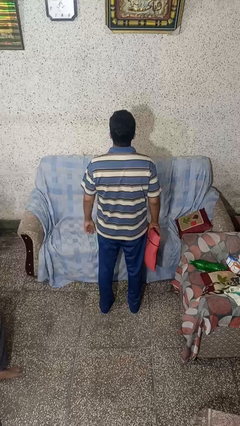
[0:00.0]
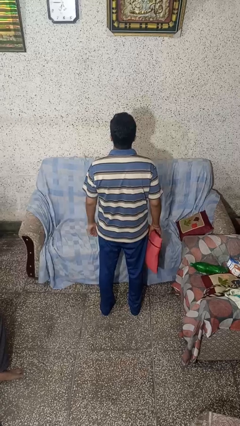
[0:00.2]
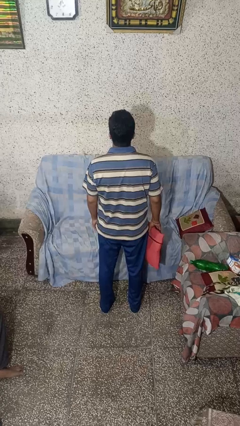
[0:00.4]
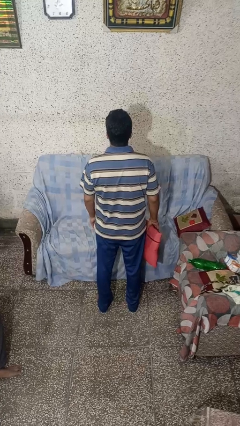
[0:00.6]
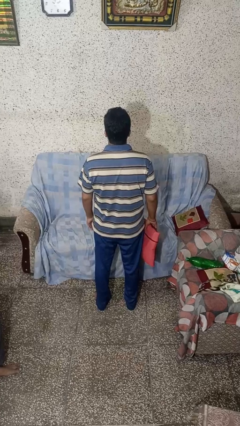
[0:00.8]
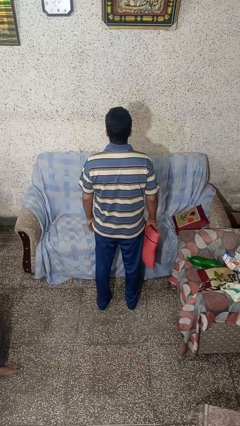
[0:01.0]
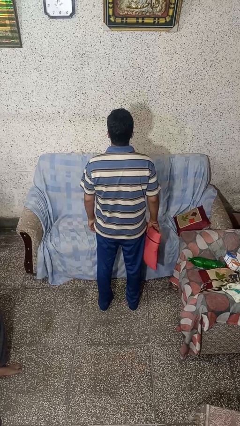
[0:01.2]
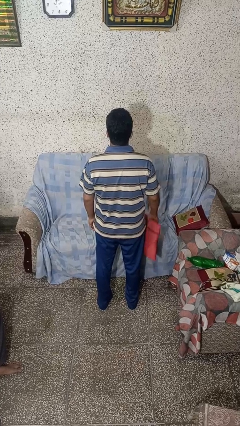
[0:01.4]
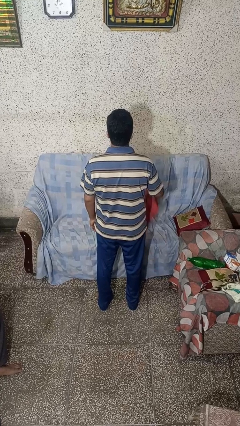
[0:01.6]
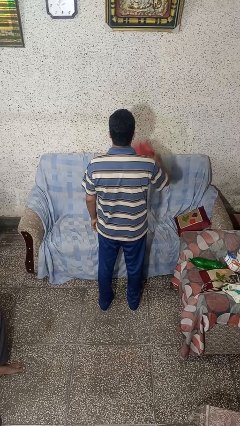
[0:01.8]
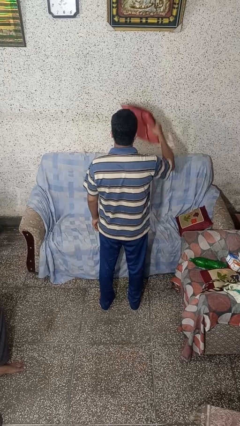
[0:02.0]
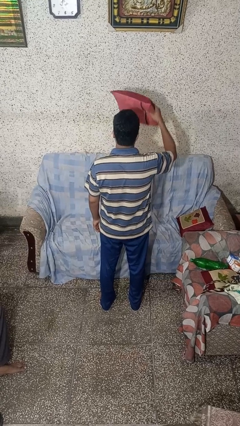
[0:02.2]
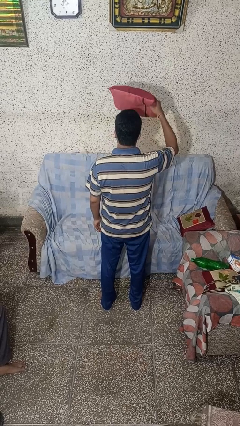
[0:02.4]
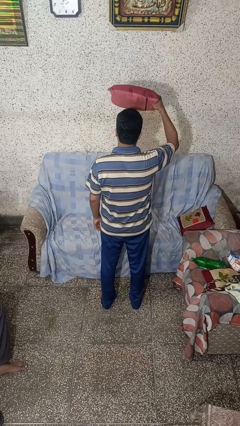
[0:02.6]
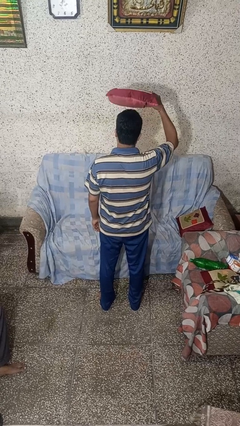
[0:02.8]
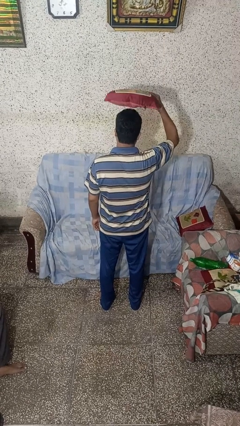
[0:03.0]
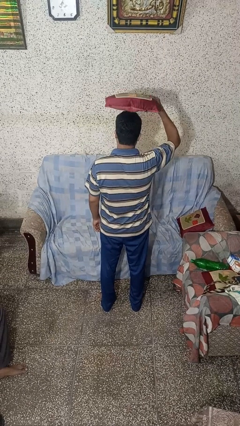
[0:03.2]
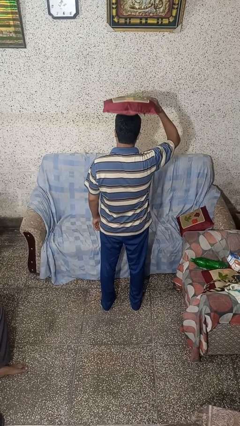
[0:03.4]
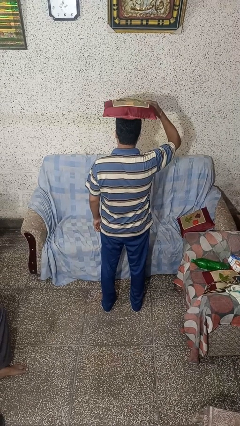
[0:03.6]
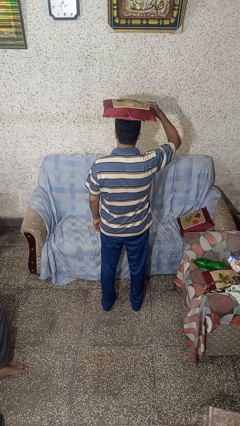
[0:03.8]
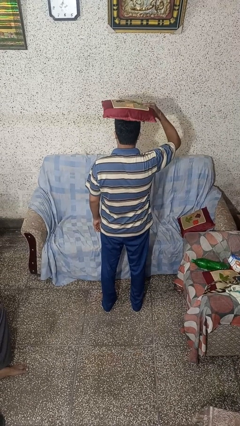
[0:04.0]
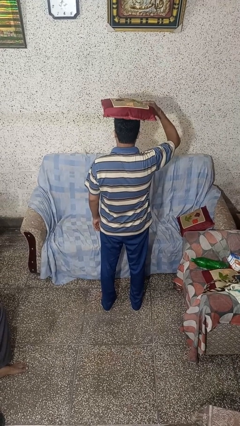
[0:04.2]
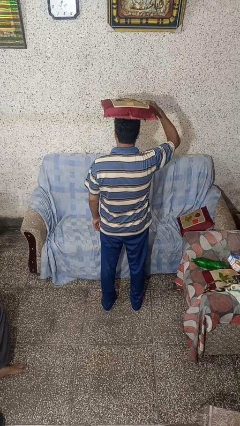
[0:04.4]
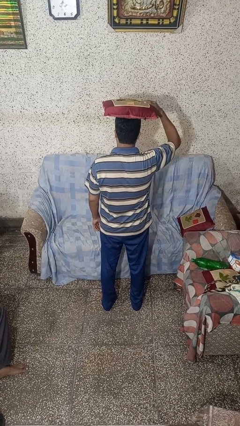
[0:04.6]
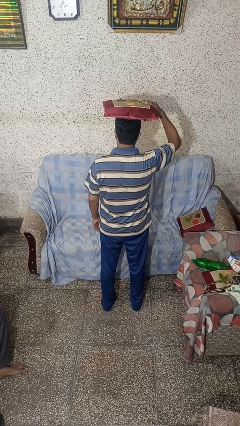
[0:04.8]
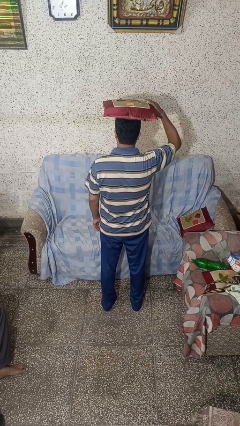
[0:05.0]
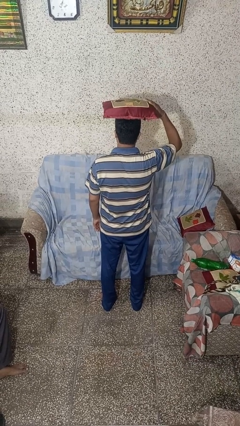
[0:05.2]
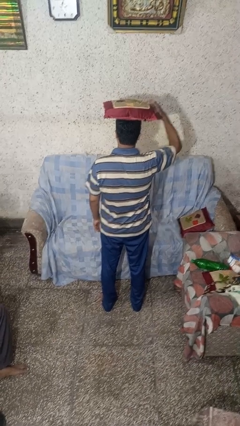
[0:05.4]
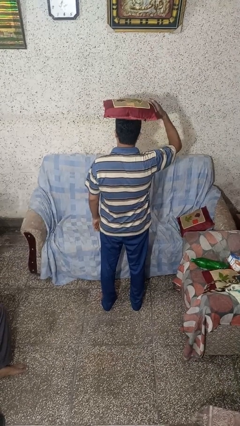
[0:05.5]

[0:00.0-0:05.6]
person holds object above head

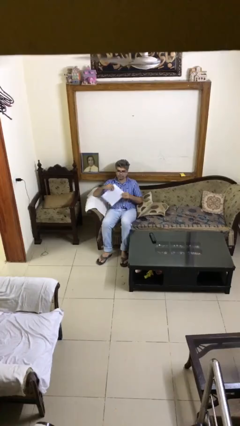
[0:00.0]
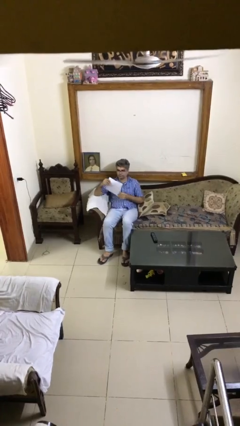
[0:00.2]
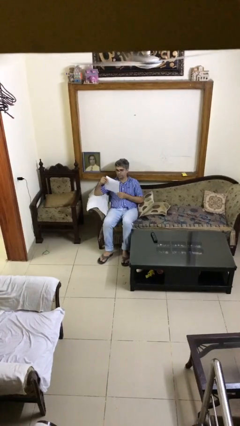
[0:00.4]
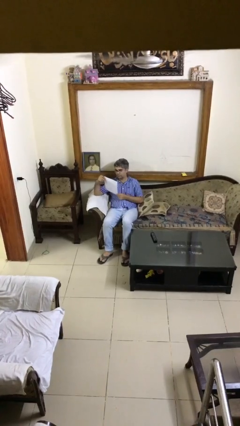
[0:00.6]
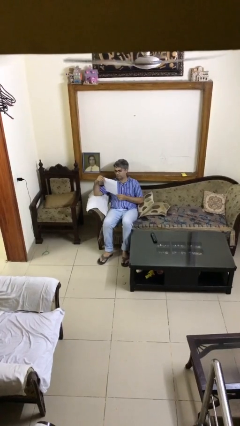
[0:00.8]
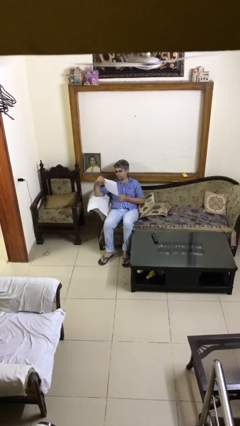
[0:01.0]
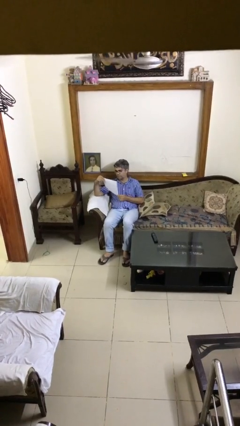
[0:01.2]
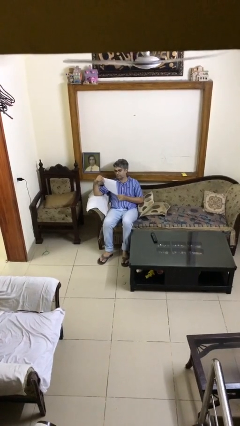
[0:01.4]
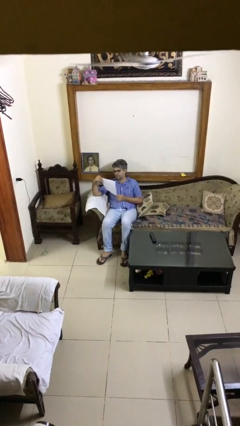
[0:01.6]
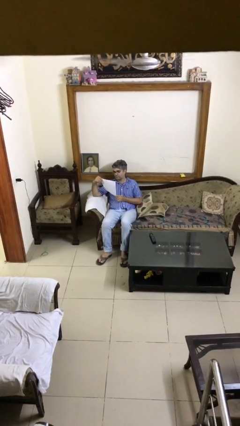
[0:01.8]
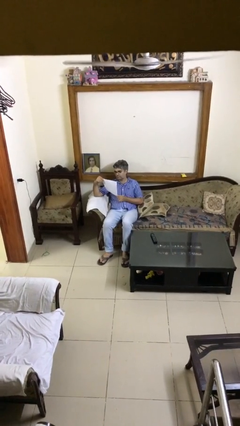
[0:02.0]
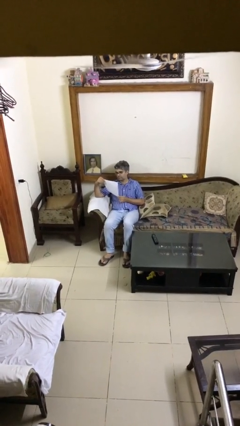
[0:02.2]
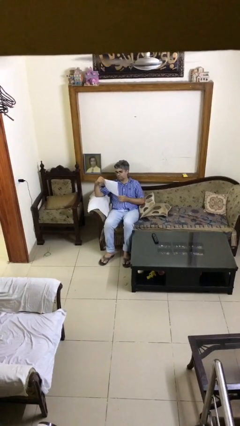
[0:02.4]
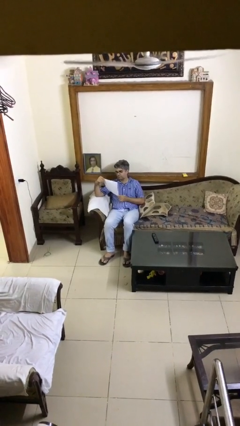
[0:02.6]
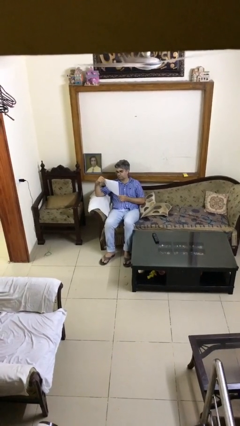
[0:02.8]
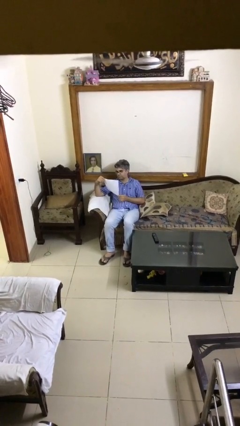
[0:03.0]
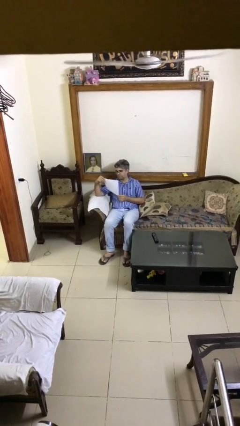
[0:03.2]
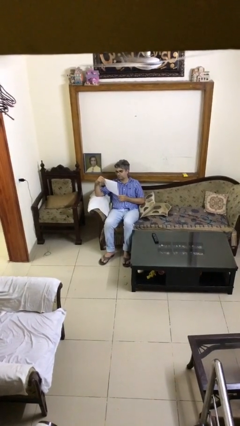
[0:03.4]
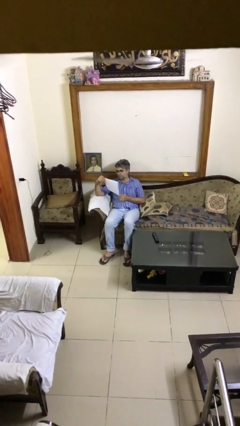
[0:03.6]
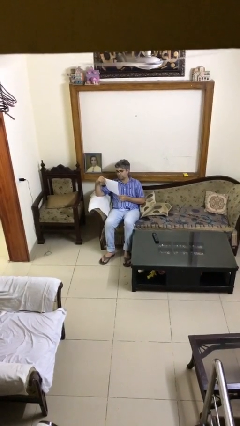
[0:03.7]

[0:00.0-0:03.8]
person reads document

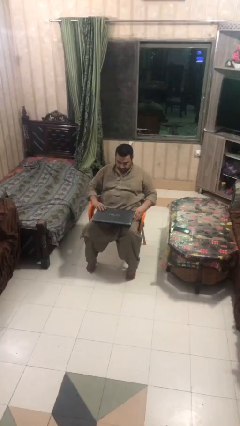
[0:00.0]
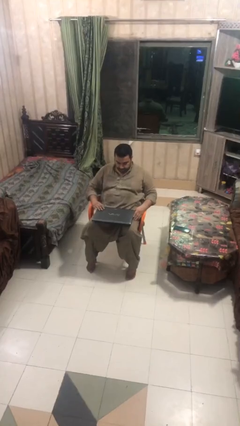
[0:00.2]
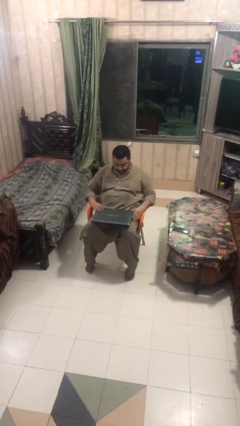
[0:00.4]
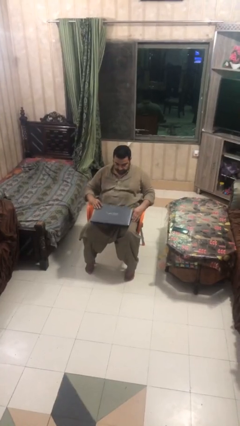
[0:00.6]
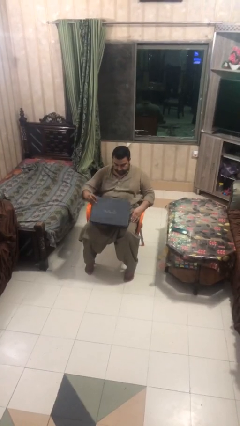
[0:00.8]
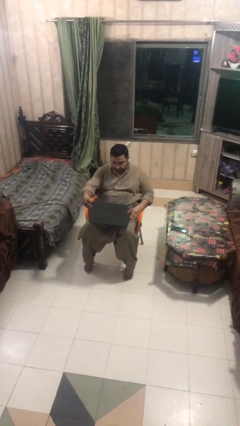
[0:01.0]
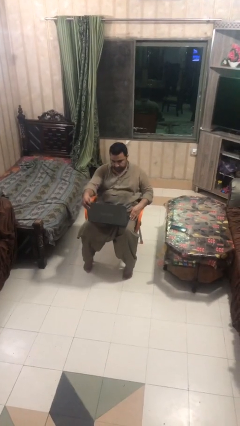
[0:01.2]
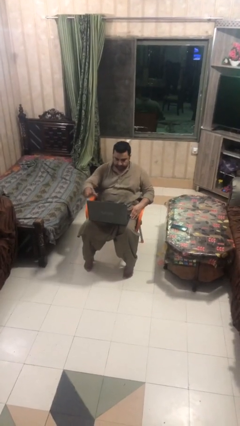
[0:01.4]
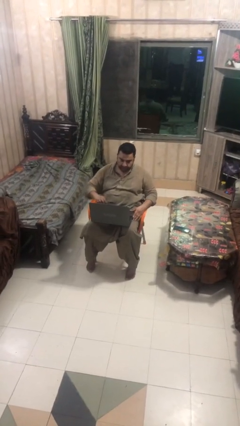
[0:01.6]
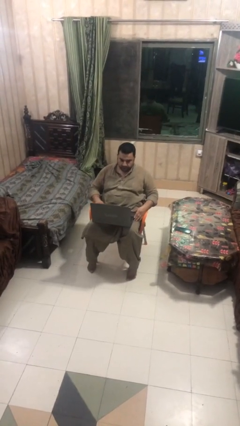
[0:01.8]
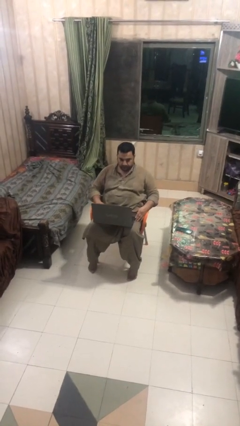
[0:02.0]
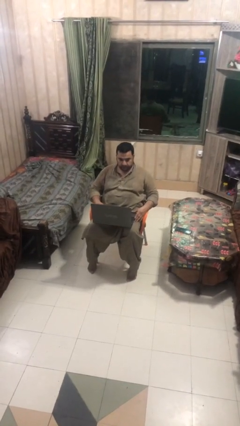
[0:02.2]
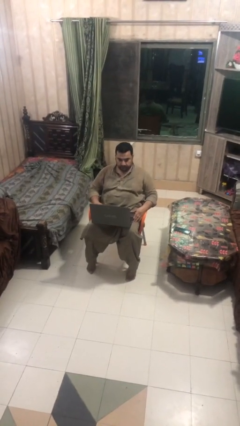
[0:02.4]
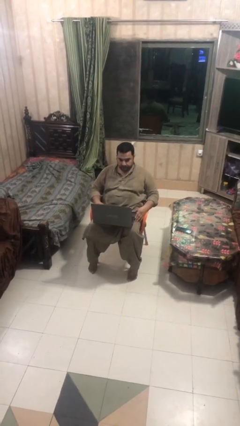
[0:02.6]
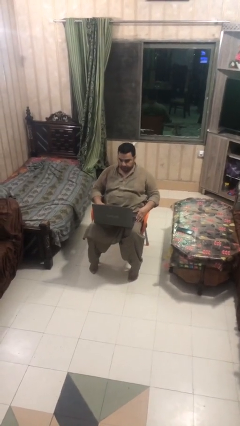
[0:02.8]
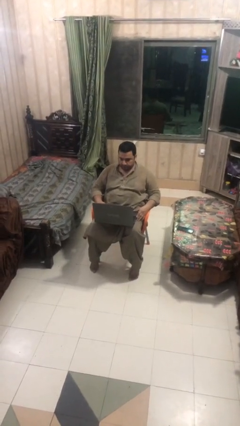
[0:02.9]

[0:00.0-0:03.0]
person opens laptop

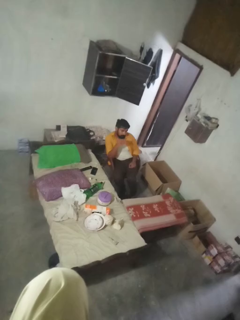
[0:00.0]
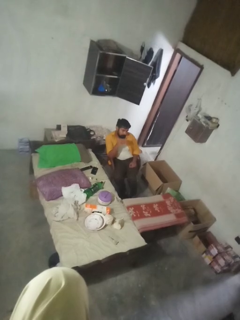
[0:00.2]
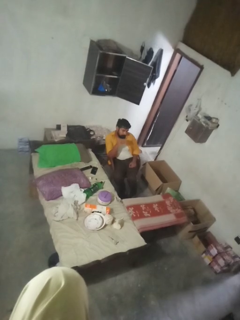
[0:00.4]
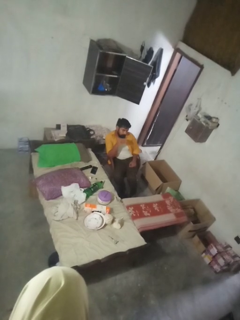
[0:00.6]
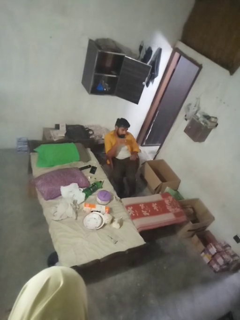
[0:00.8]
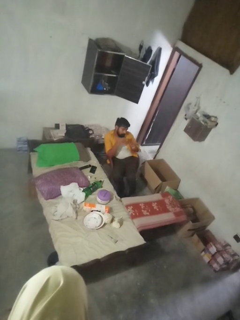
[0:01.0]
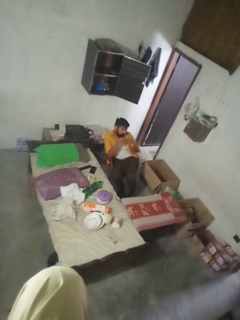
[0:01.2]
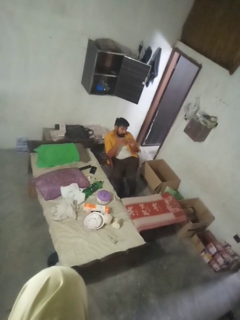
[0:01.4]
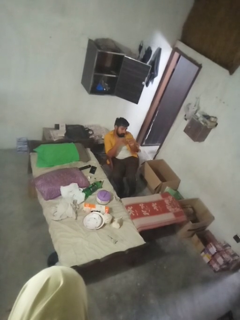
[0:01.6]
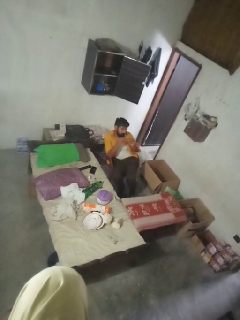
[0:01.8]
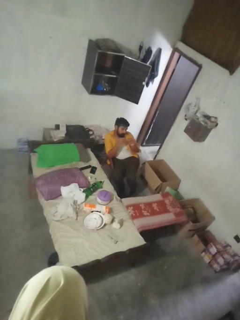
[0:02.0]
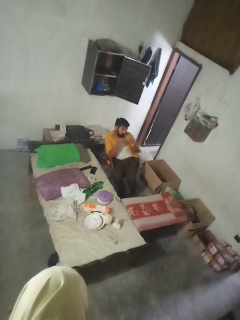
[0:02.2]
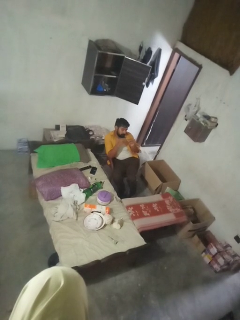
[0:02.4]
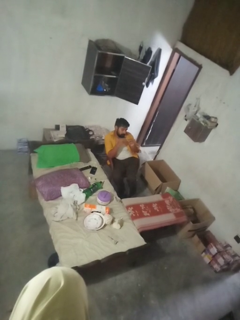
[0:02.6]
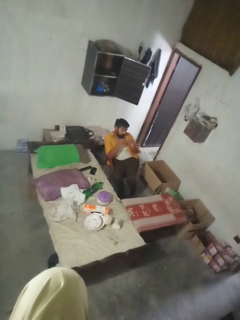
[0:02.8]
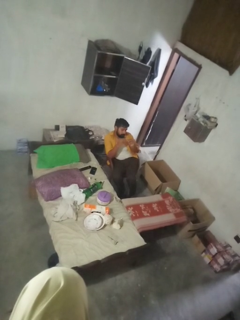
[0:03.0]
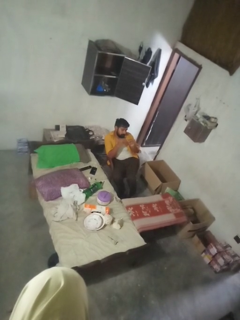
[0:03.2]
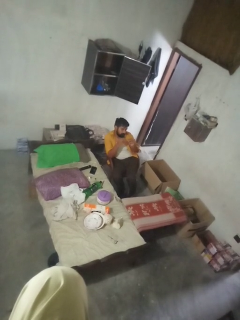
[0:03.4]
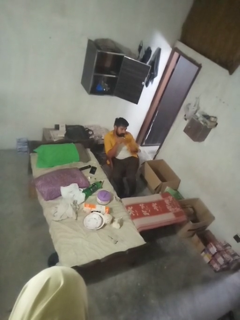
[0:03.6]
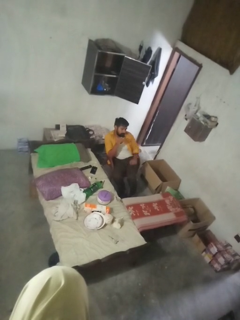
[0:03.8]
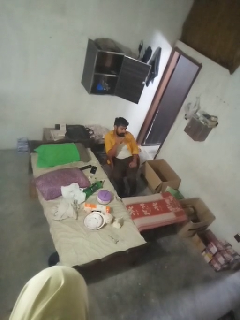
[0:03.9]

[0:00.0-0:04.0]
person clips fingernails

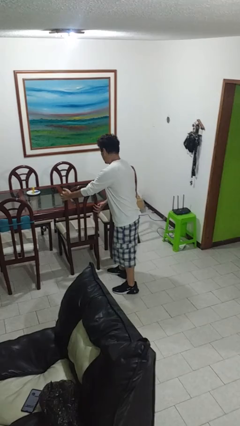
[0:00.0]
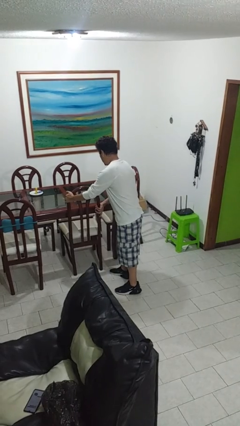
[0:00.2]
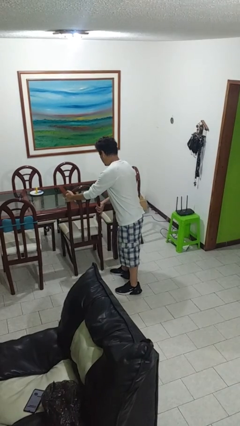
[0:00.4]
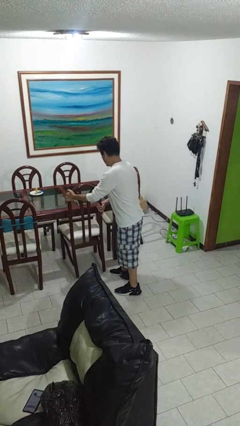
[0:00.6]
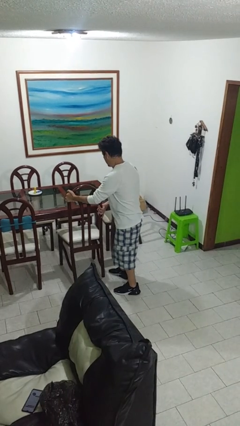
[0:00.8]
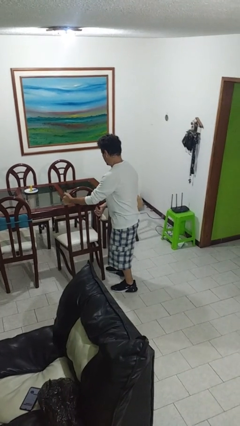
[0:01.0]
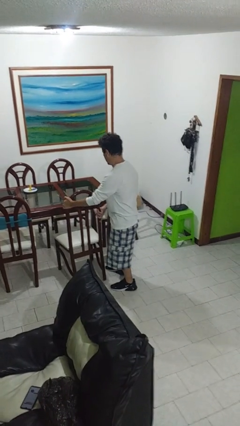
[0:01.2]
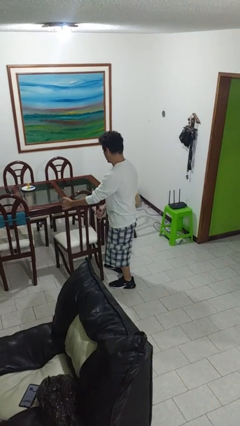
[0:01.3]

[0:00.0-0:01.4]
person pulls out chair

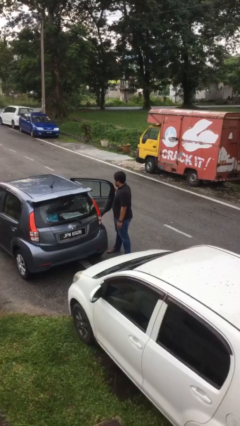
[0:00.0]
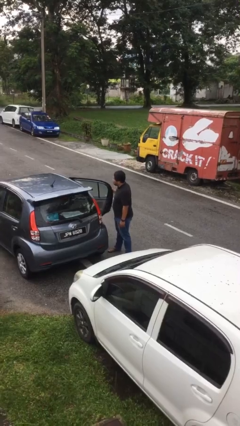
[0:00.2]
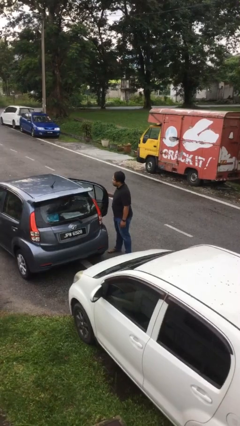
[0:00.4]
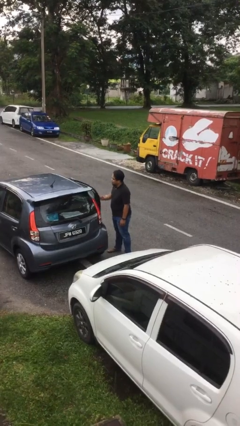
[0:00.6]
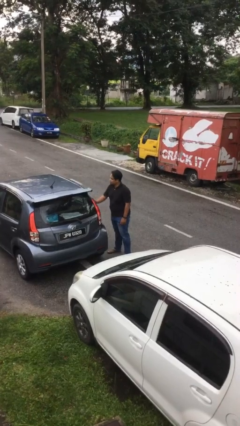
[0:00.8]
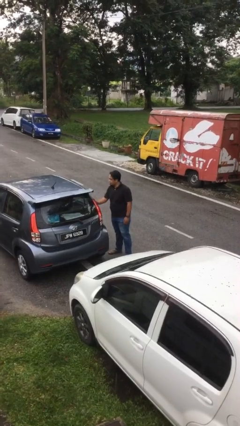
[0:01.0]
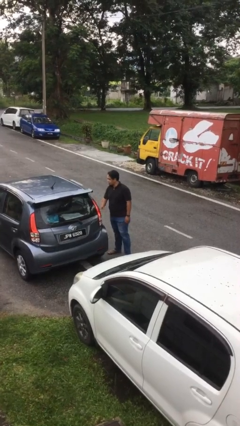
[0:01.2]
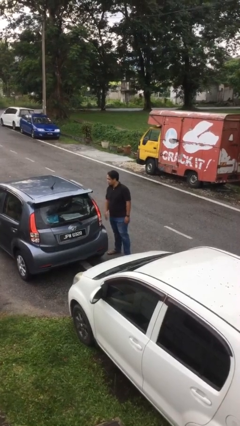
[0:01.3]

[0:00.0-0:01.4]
person closes car door
